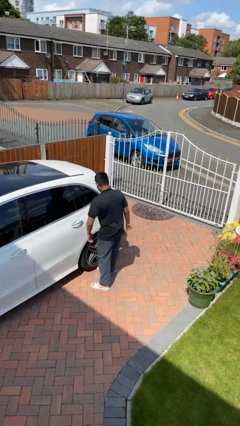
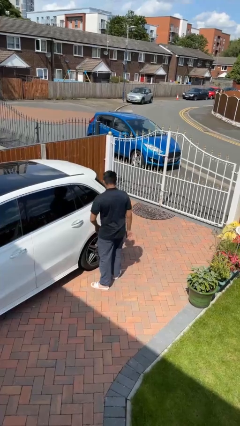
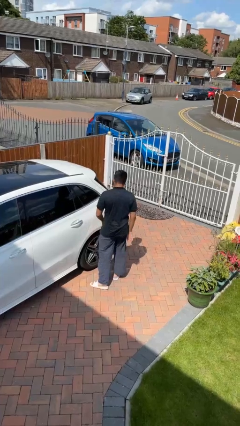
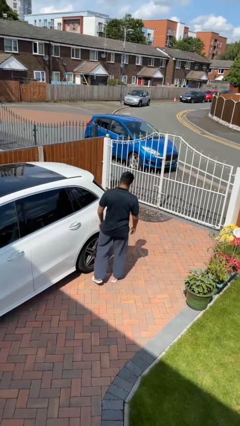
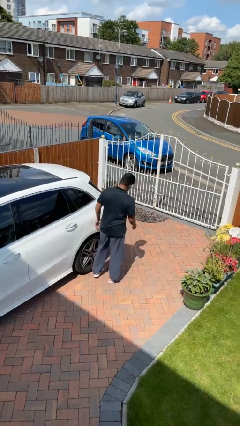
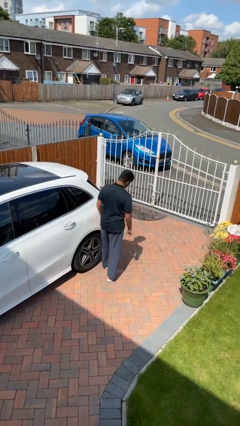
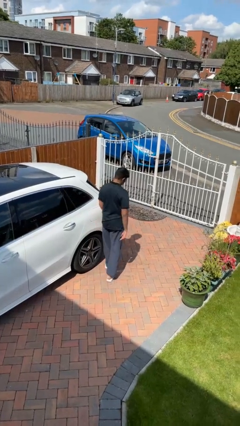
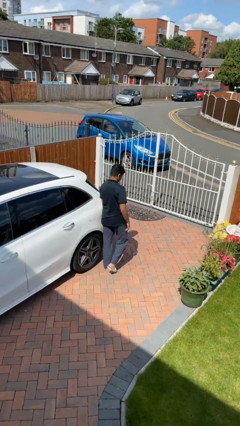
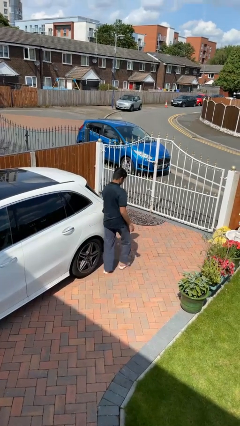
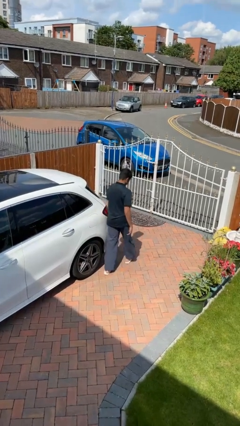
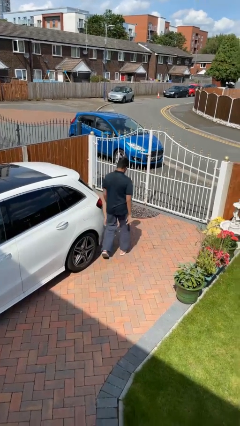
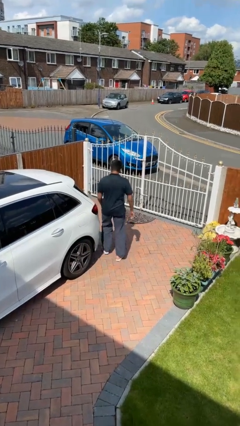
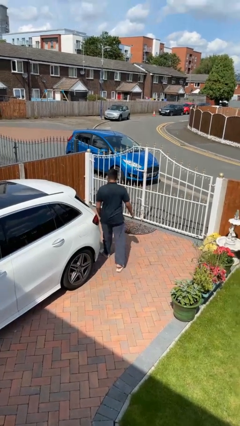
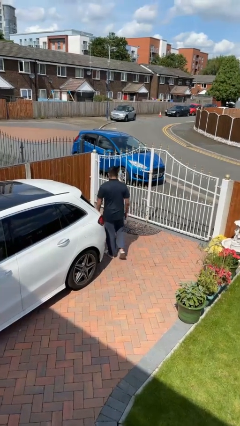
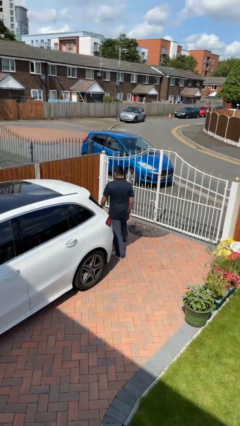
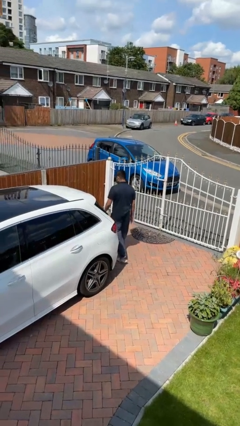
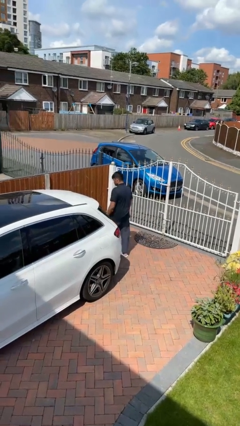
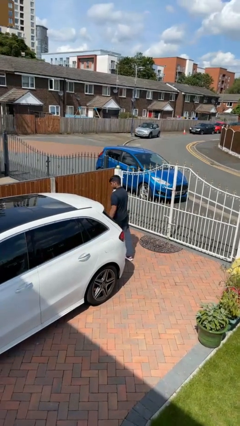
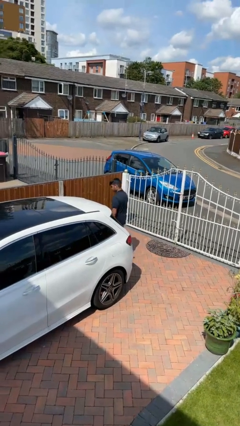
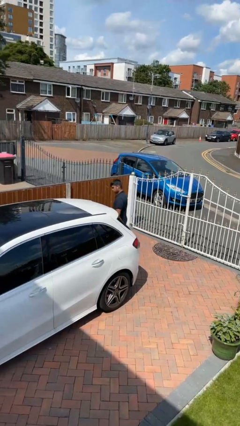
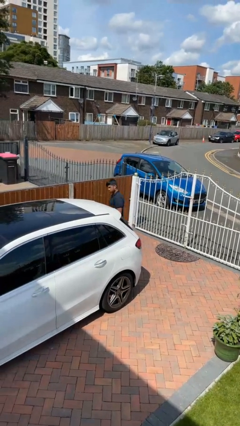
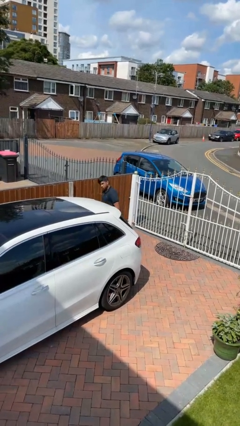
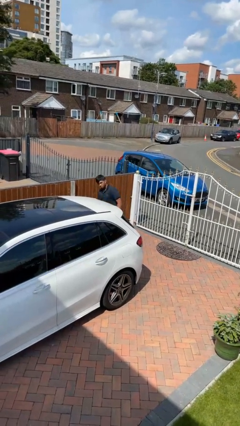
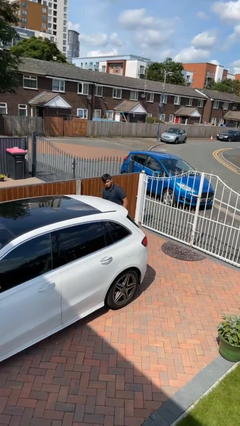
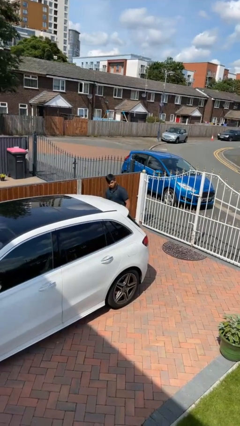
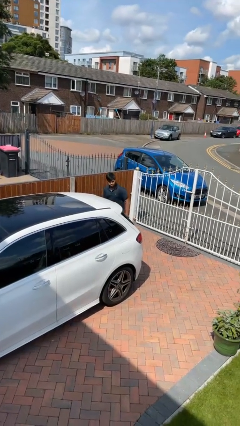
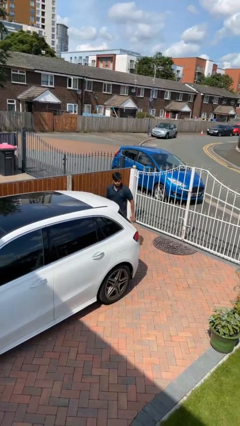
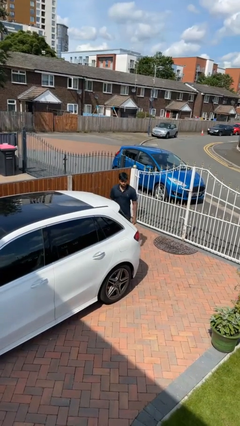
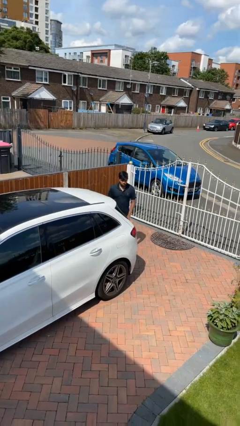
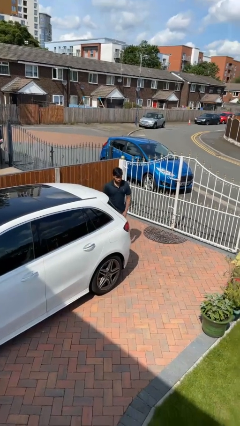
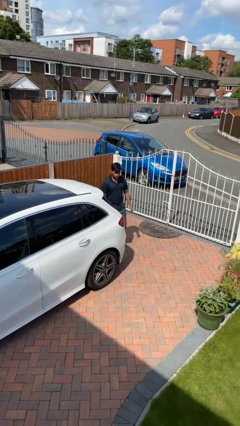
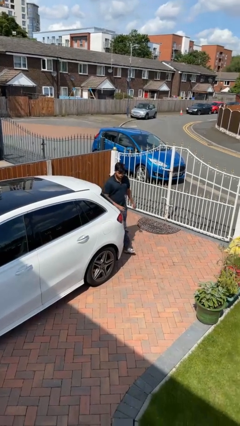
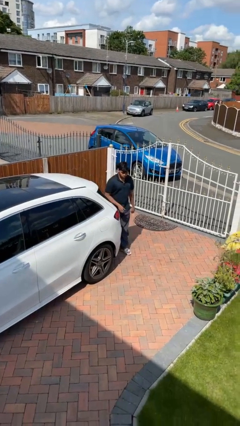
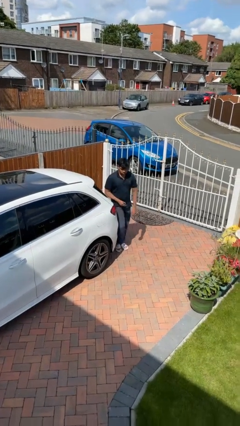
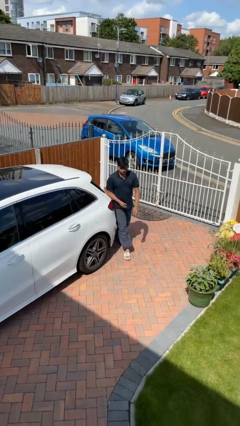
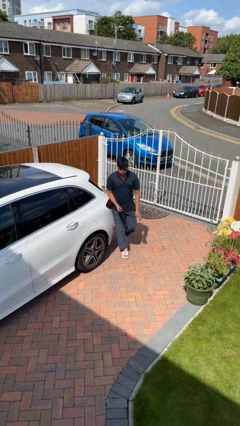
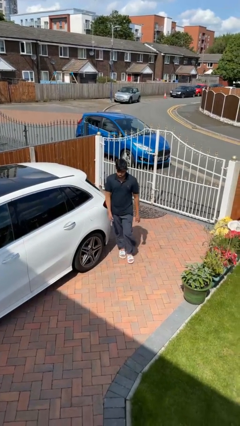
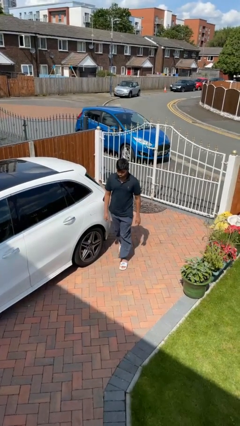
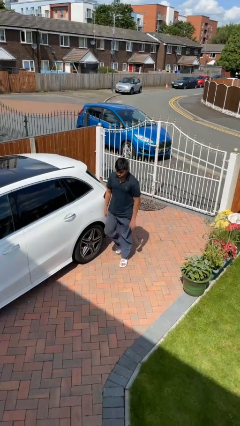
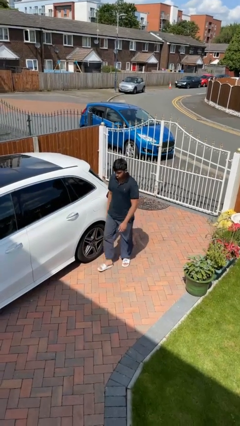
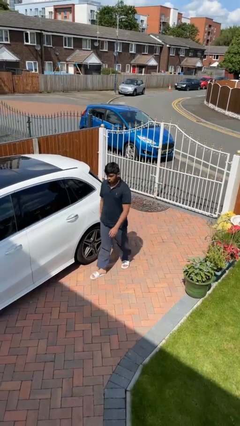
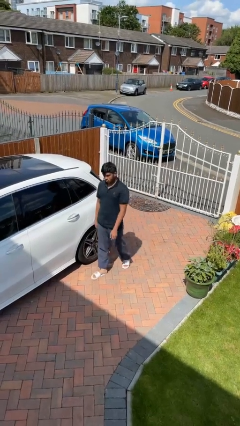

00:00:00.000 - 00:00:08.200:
person walks around car

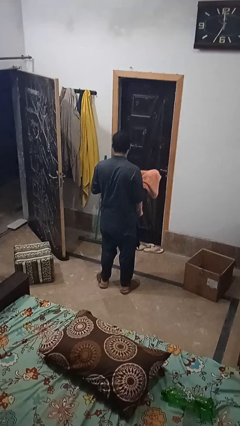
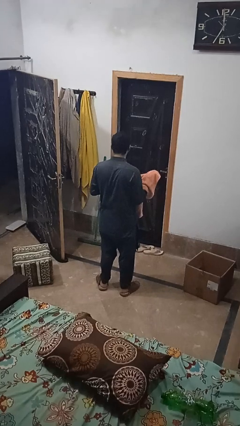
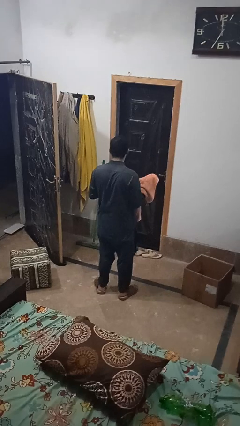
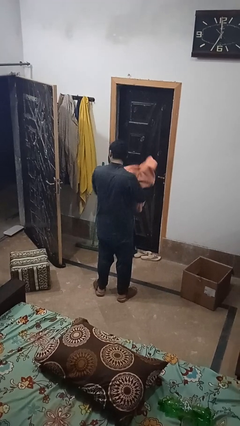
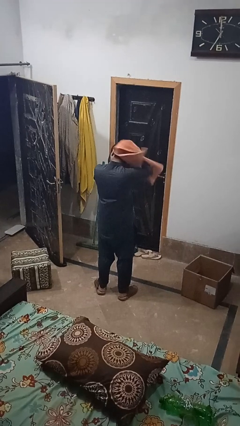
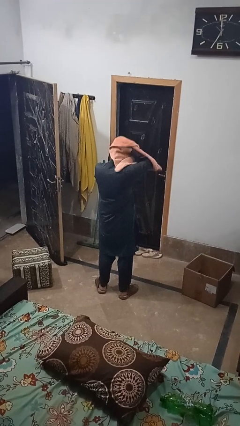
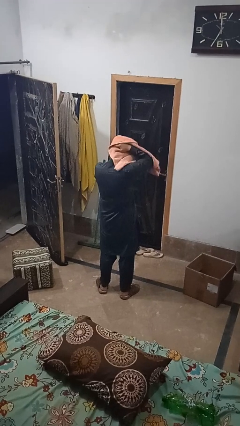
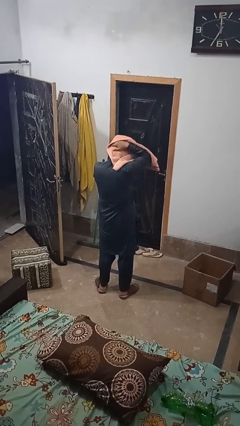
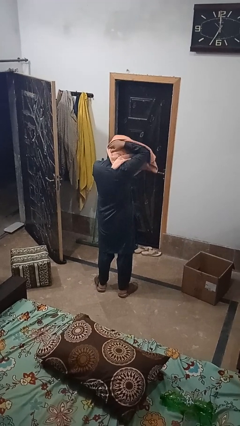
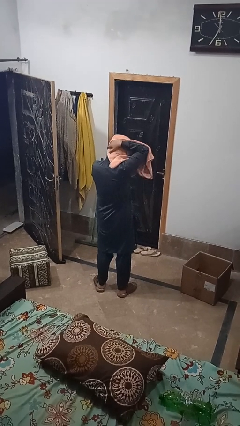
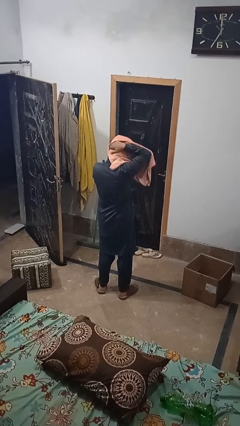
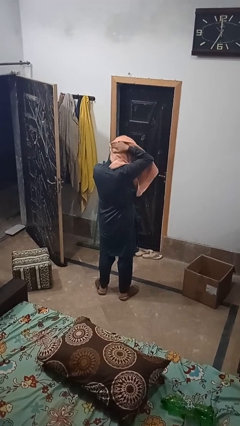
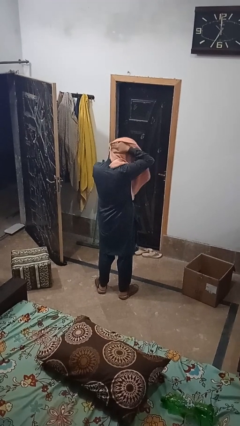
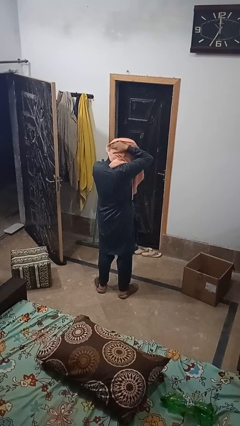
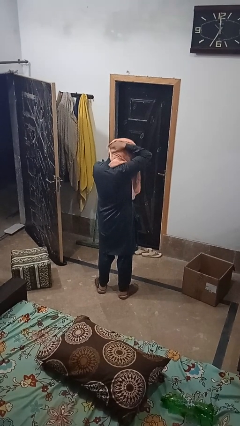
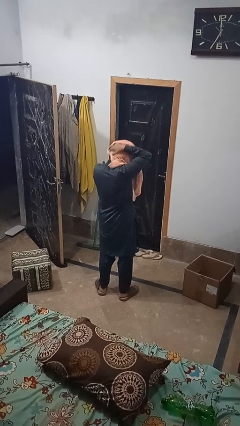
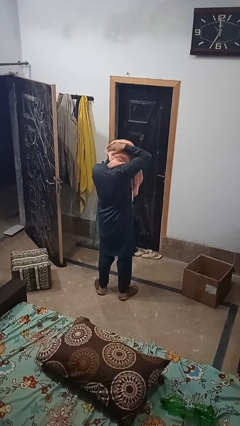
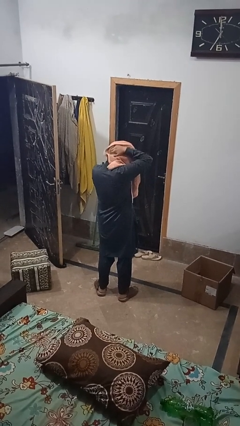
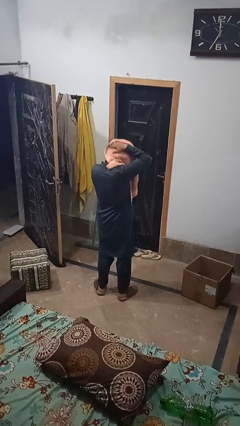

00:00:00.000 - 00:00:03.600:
person dries hair with towel

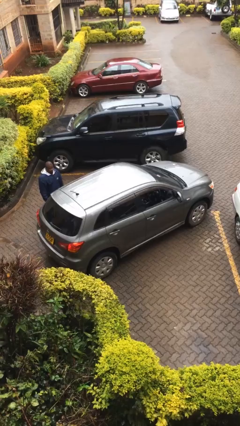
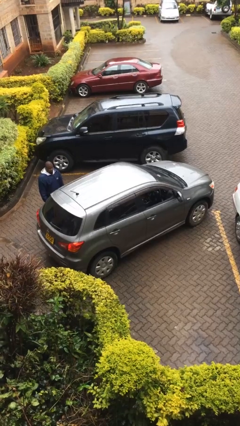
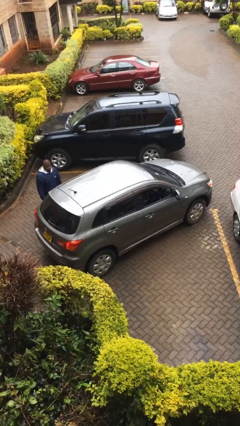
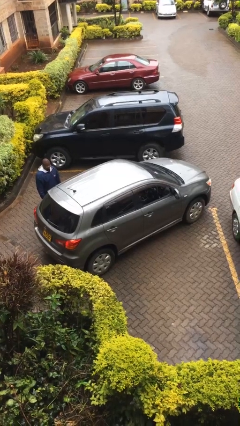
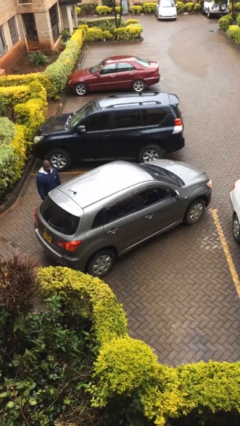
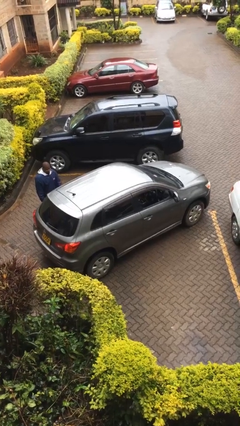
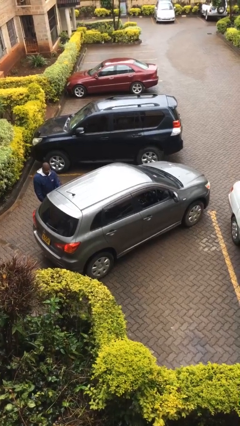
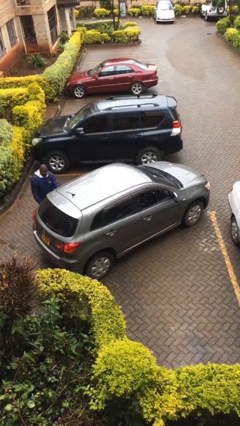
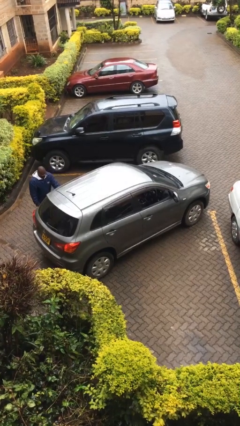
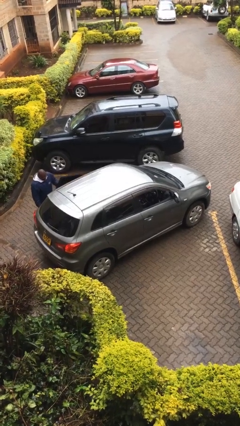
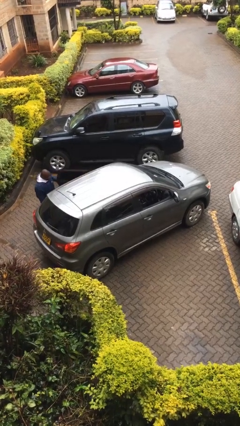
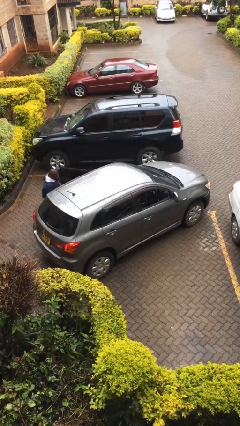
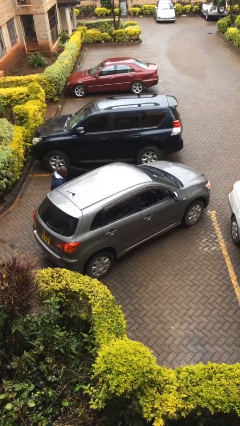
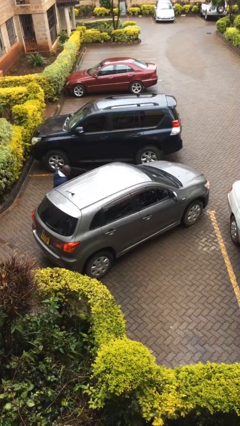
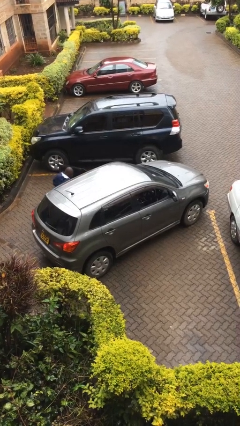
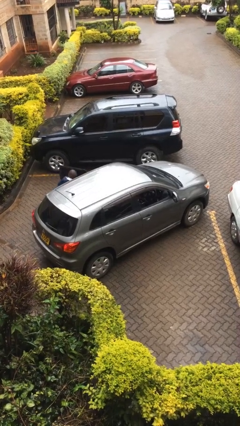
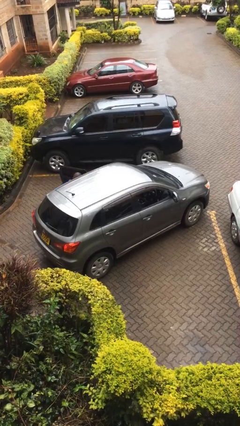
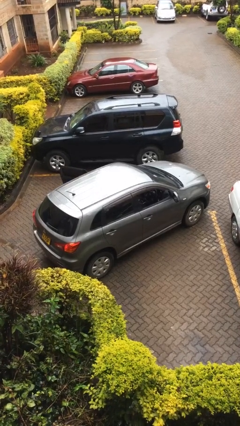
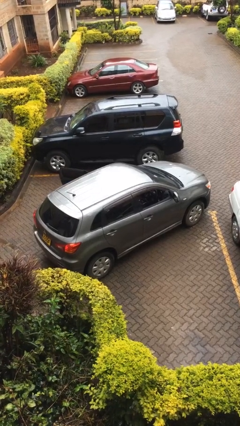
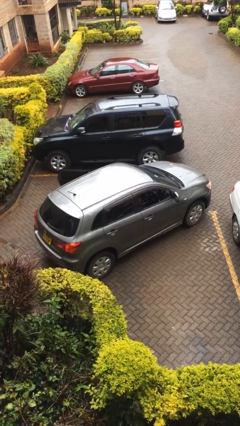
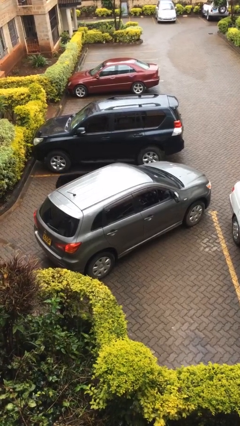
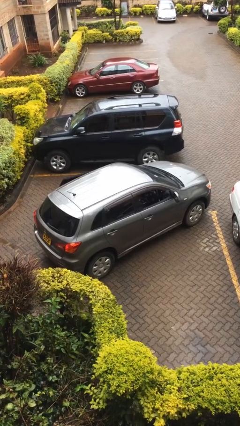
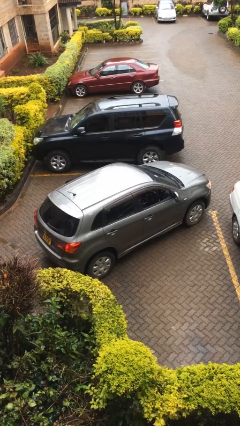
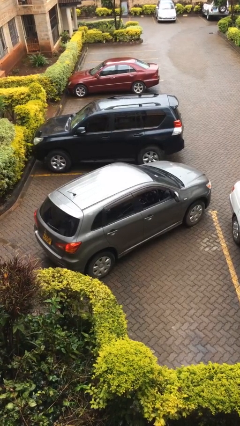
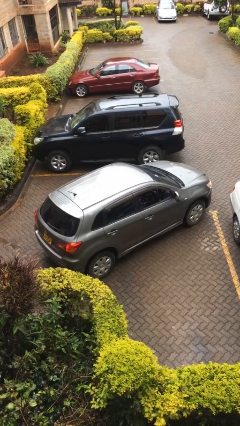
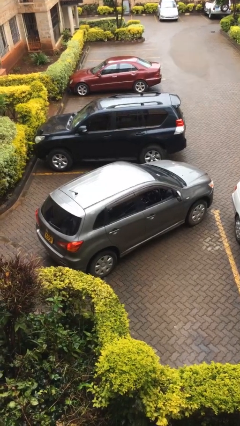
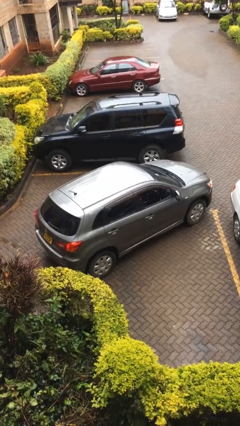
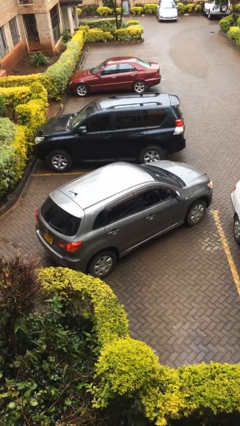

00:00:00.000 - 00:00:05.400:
car picks up person

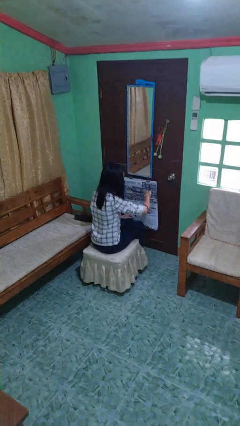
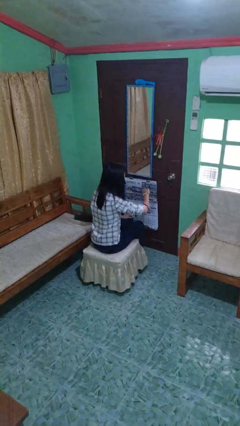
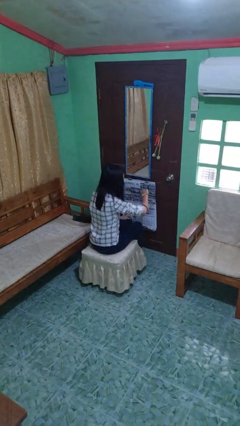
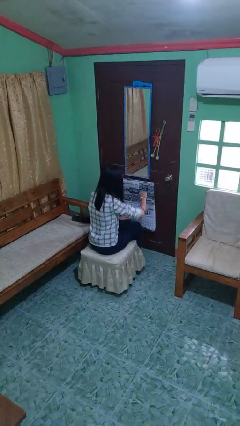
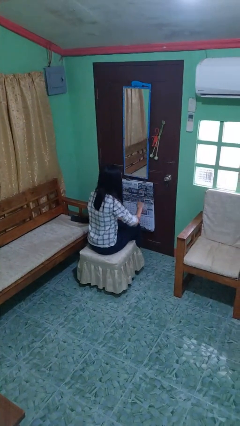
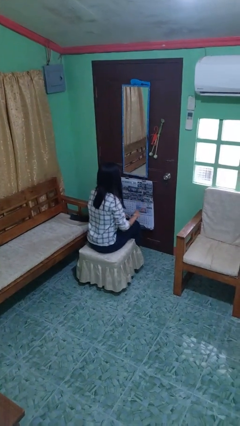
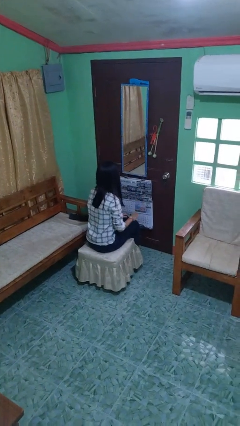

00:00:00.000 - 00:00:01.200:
person looks at wristwatch
